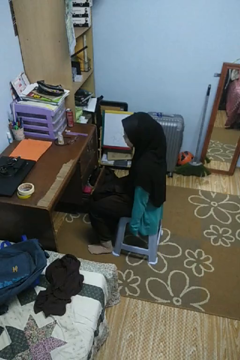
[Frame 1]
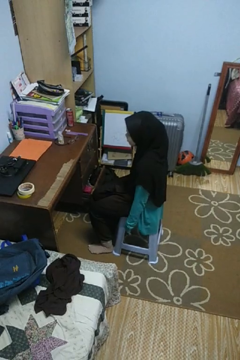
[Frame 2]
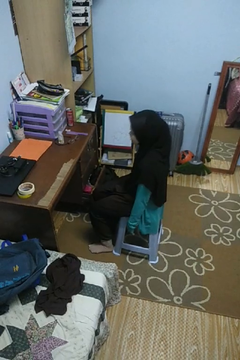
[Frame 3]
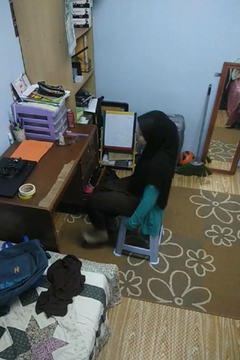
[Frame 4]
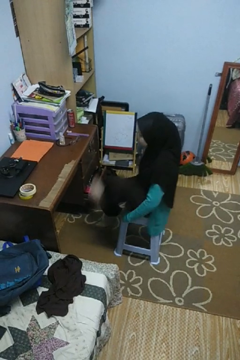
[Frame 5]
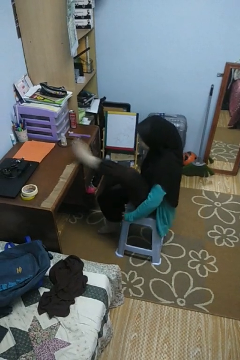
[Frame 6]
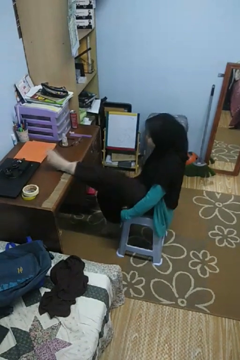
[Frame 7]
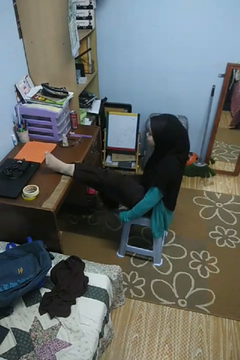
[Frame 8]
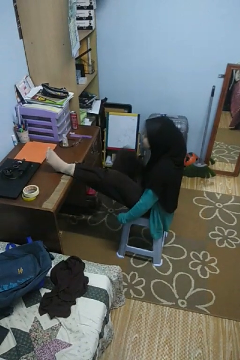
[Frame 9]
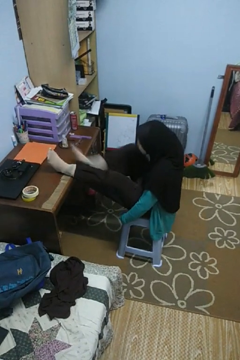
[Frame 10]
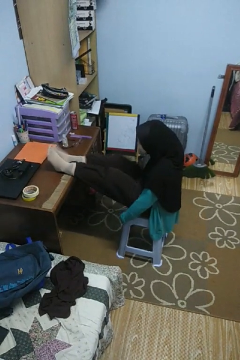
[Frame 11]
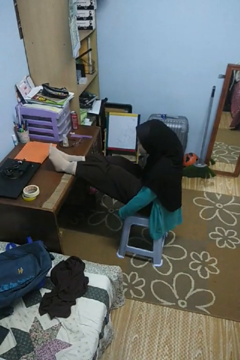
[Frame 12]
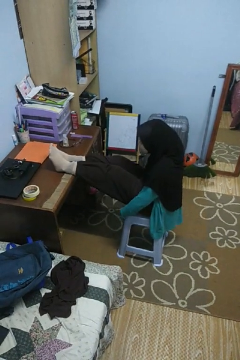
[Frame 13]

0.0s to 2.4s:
person puts feet up

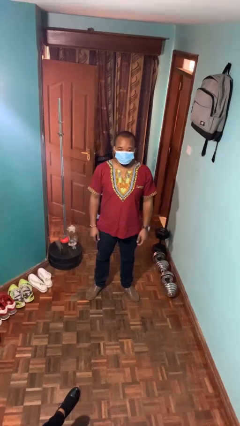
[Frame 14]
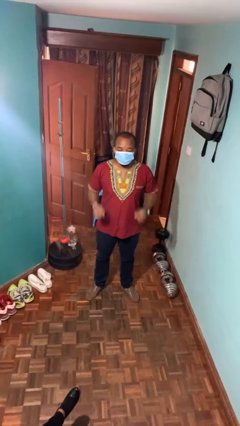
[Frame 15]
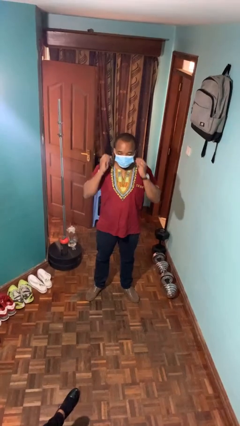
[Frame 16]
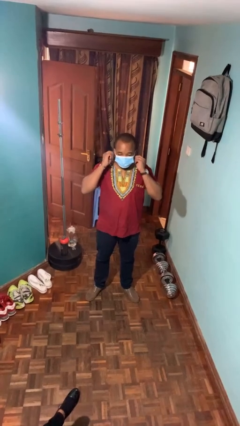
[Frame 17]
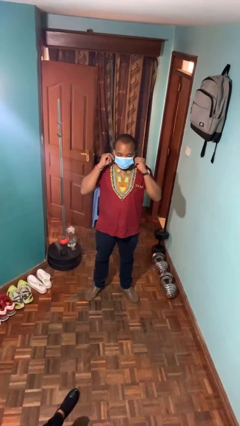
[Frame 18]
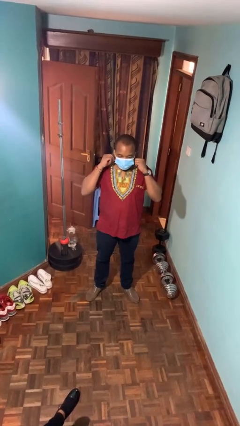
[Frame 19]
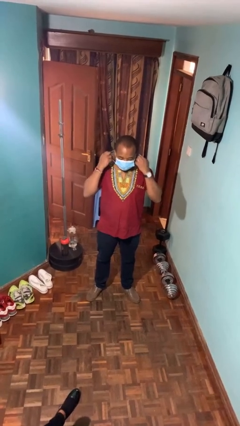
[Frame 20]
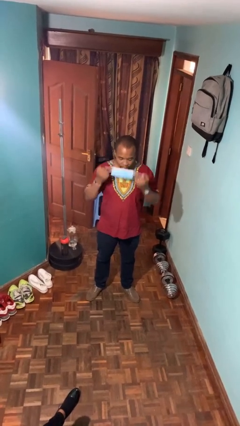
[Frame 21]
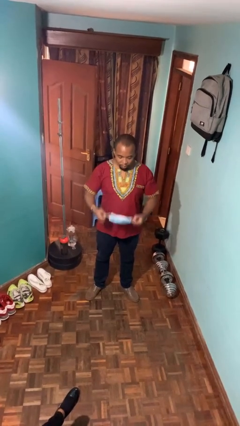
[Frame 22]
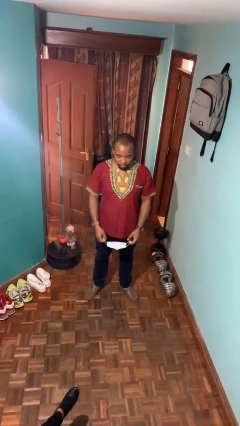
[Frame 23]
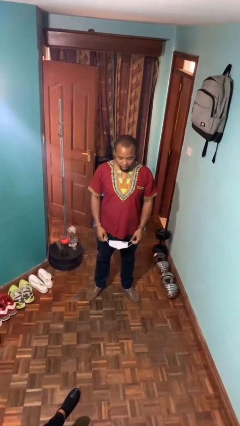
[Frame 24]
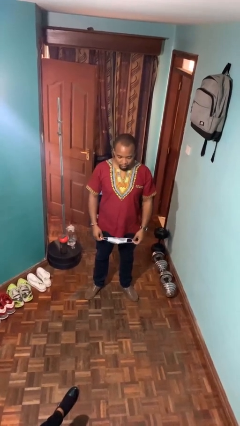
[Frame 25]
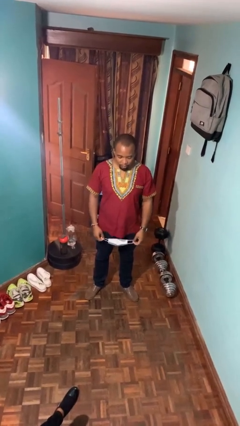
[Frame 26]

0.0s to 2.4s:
person takes off facemask

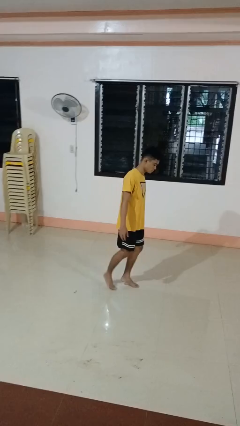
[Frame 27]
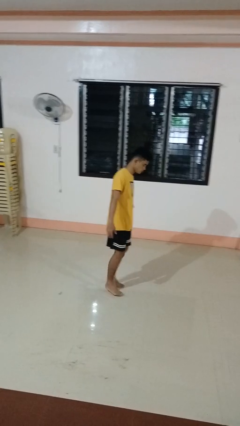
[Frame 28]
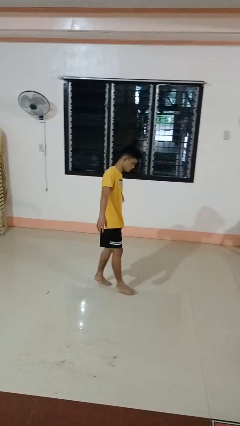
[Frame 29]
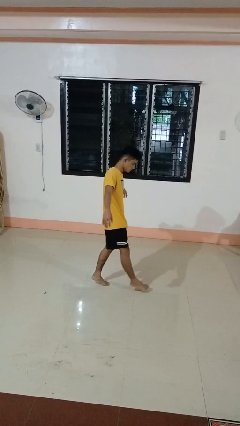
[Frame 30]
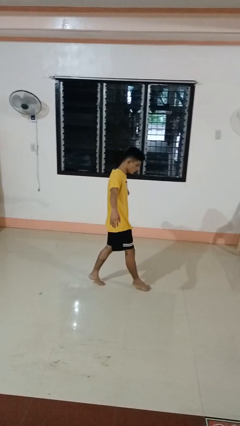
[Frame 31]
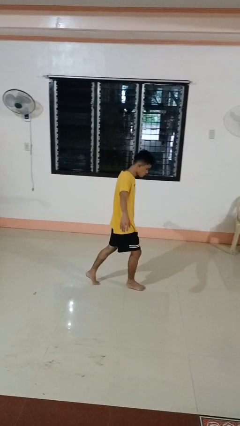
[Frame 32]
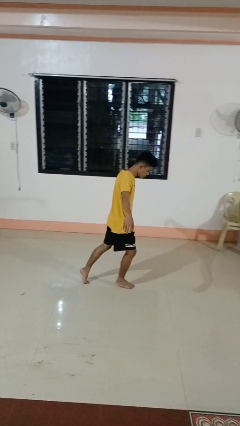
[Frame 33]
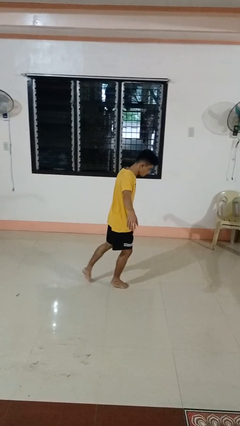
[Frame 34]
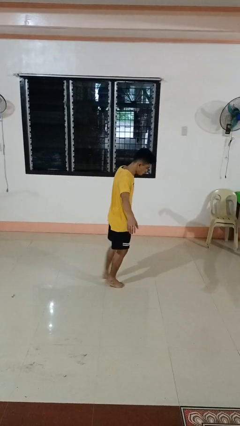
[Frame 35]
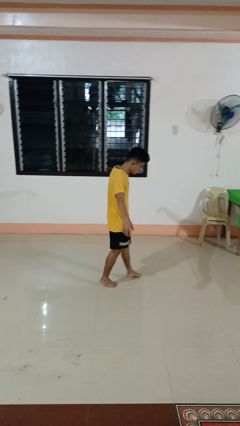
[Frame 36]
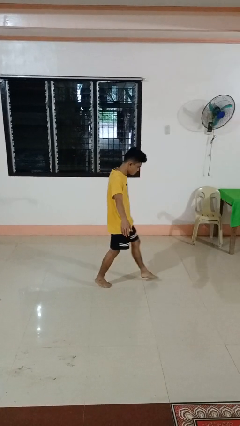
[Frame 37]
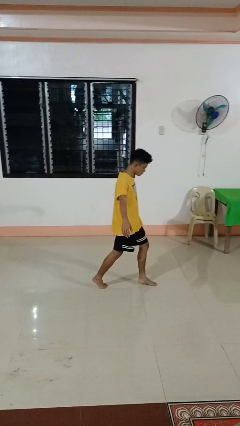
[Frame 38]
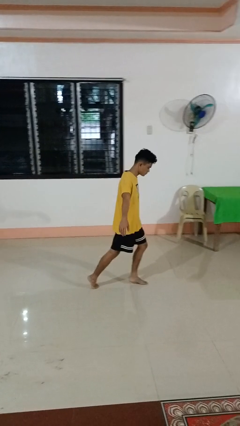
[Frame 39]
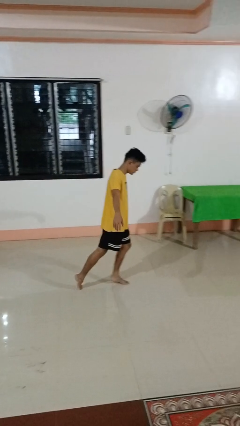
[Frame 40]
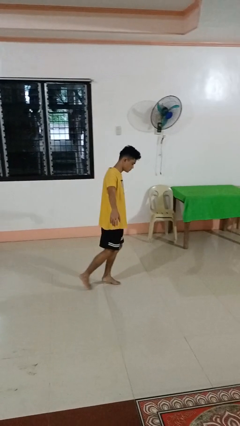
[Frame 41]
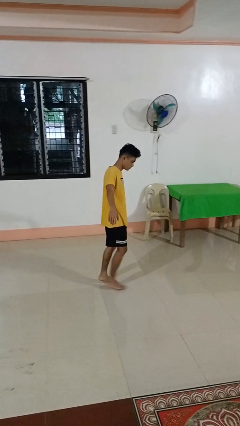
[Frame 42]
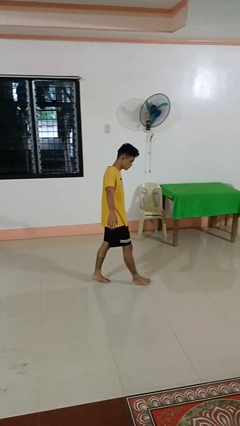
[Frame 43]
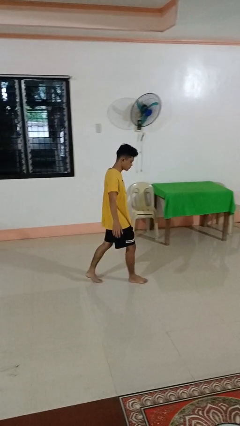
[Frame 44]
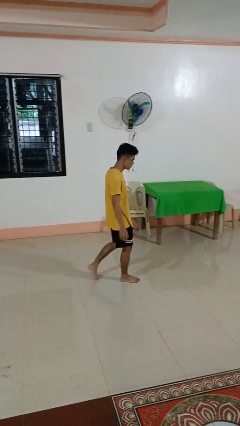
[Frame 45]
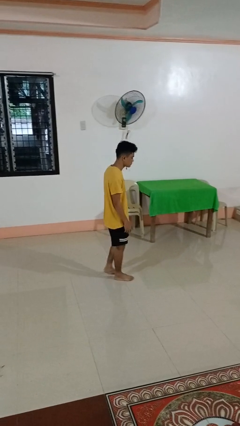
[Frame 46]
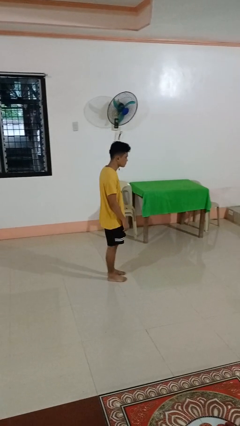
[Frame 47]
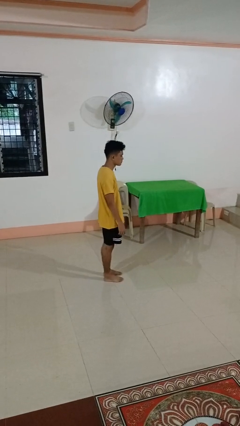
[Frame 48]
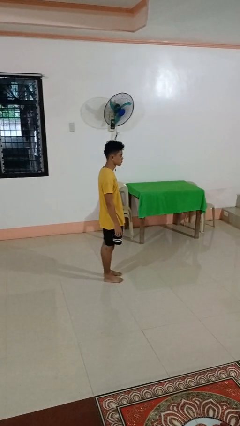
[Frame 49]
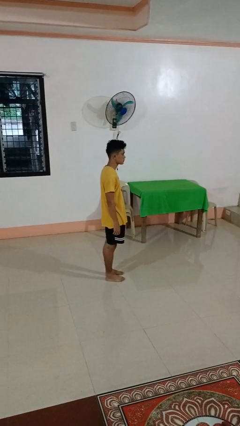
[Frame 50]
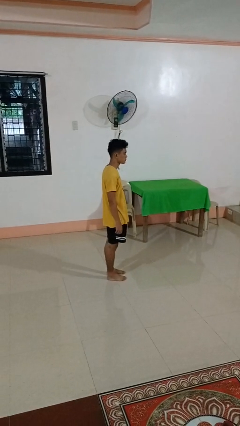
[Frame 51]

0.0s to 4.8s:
person walks tiptoe

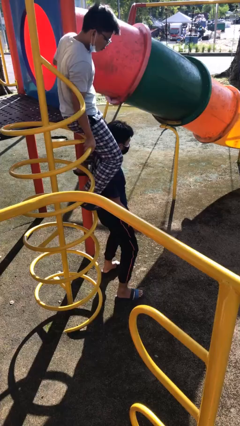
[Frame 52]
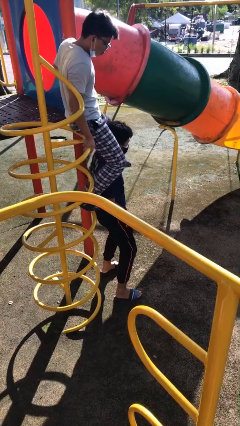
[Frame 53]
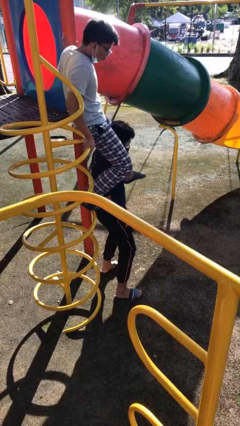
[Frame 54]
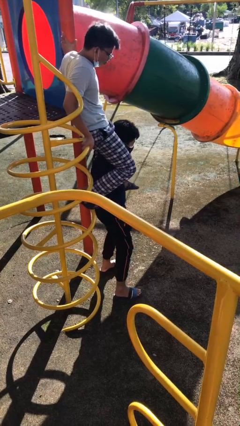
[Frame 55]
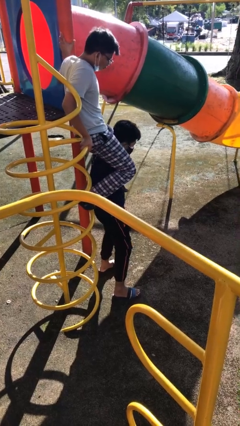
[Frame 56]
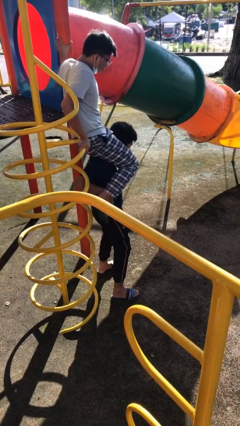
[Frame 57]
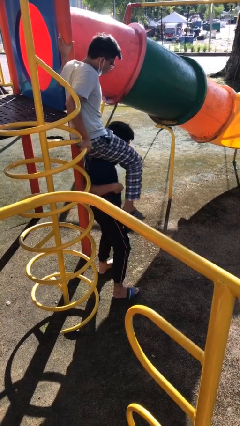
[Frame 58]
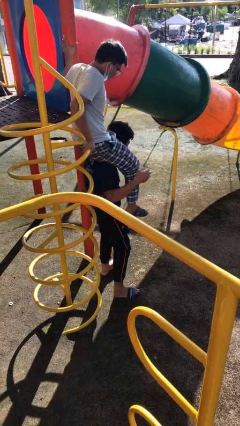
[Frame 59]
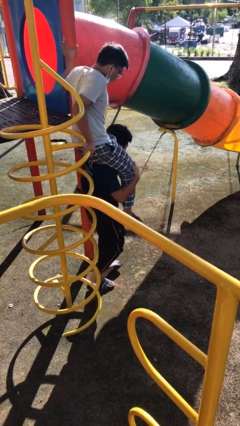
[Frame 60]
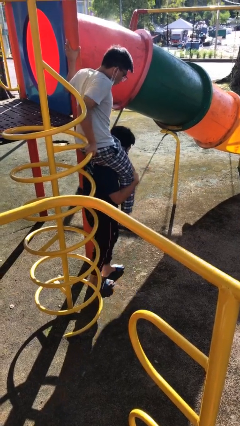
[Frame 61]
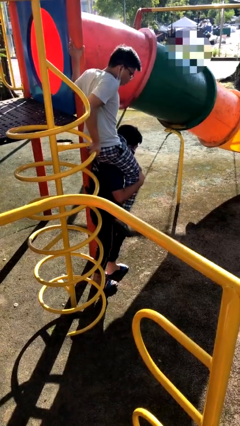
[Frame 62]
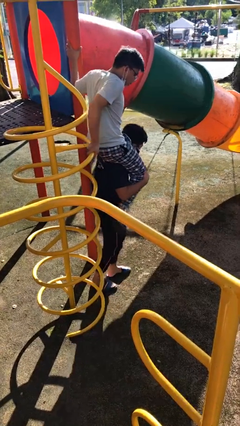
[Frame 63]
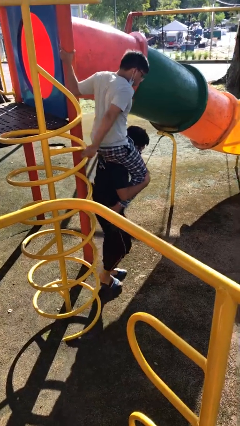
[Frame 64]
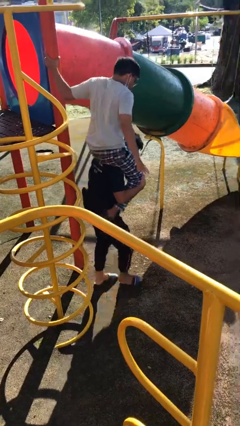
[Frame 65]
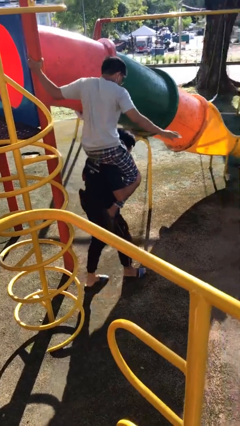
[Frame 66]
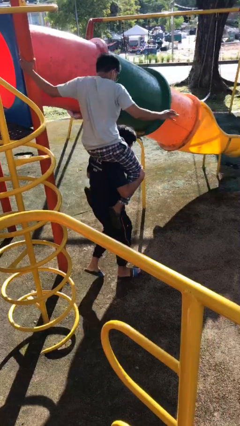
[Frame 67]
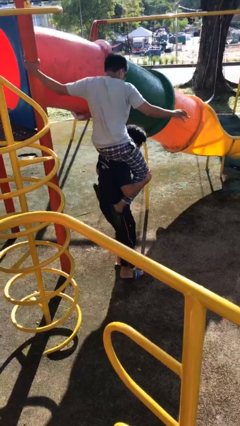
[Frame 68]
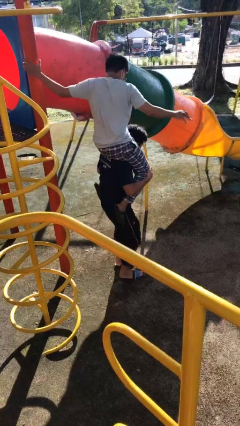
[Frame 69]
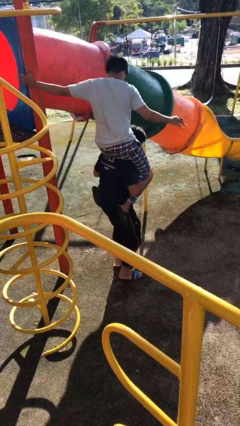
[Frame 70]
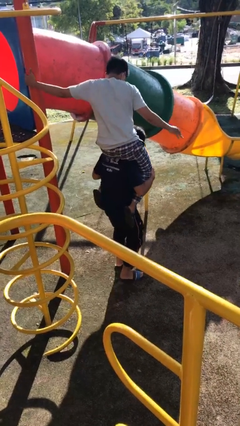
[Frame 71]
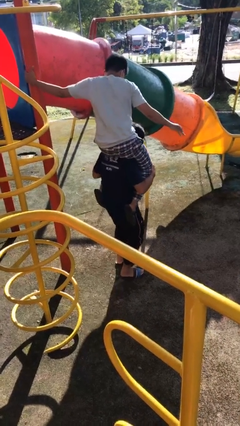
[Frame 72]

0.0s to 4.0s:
person carries person on shoulders

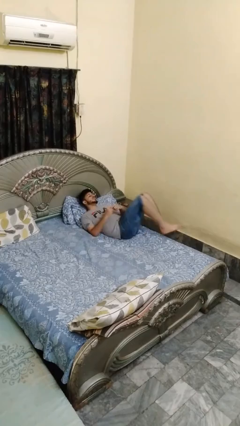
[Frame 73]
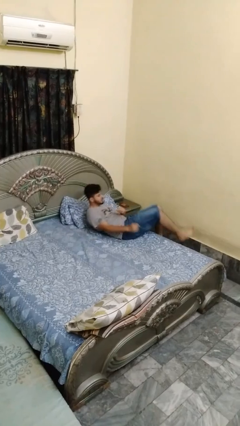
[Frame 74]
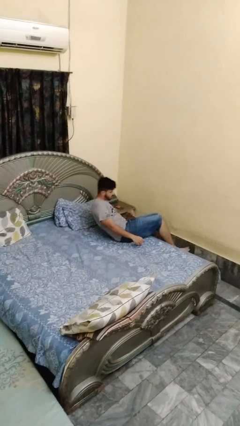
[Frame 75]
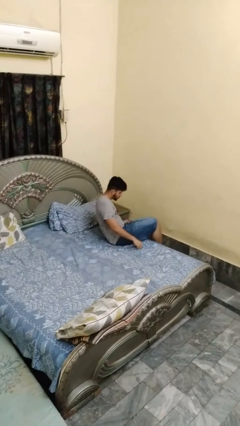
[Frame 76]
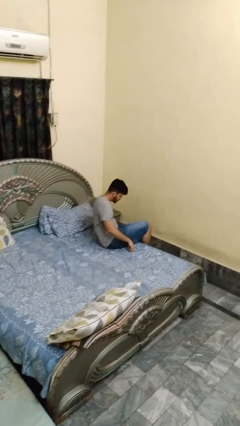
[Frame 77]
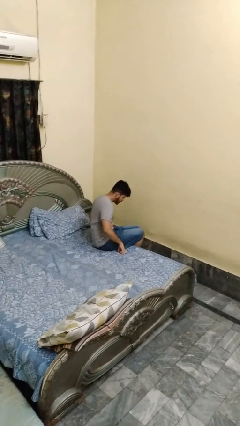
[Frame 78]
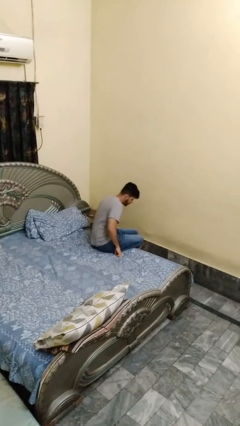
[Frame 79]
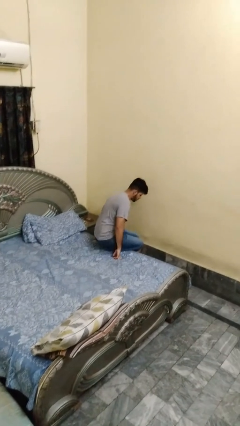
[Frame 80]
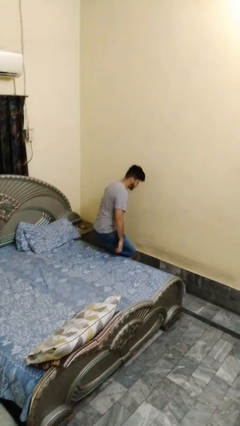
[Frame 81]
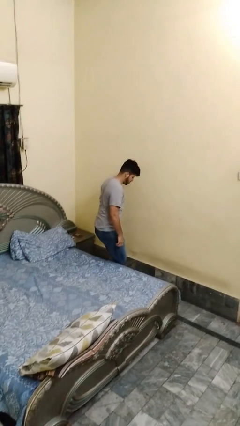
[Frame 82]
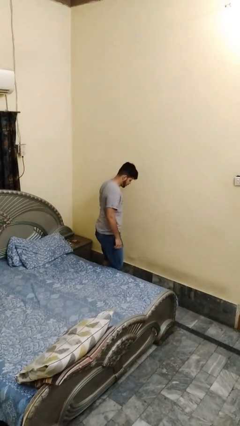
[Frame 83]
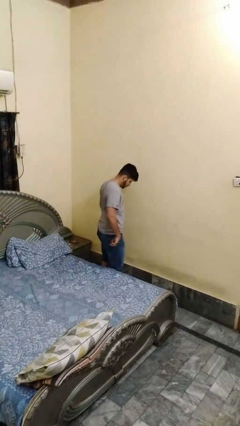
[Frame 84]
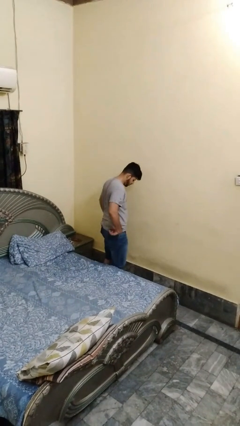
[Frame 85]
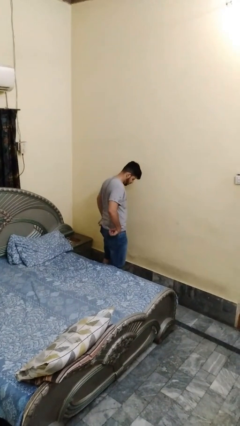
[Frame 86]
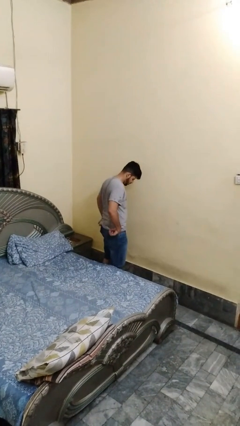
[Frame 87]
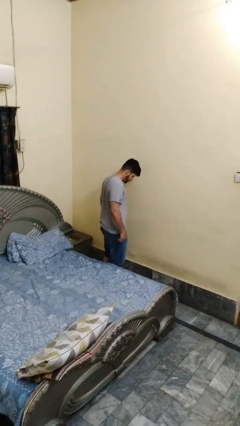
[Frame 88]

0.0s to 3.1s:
person stands up

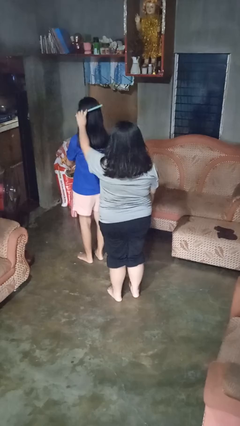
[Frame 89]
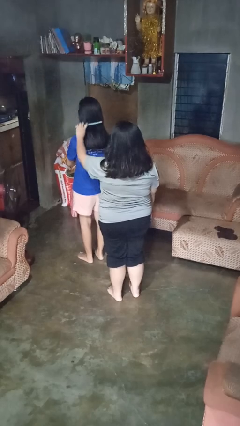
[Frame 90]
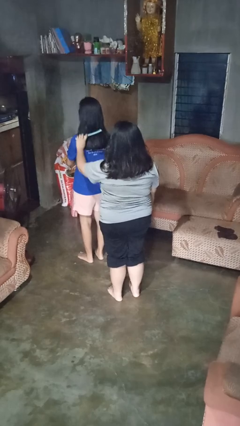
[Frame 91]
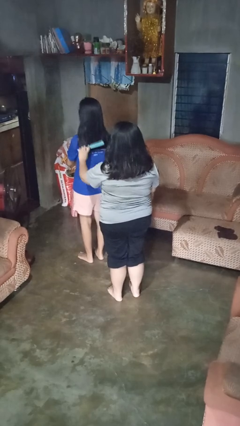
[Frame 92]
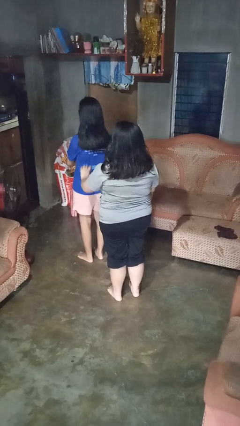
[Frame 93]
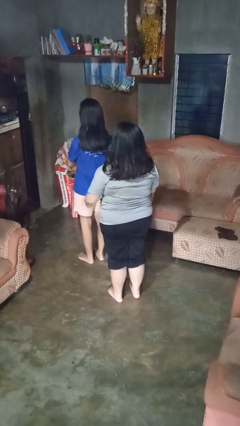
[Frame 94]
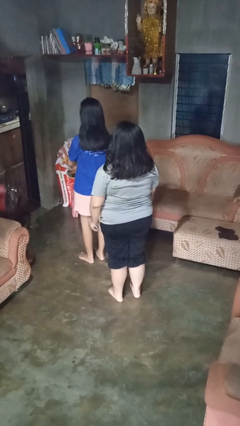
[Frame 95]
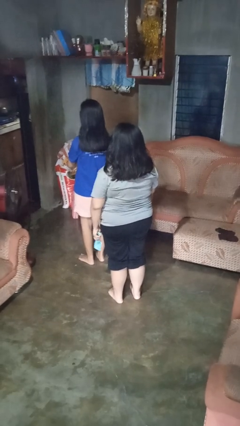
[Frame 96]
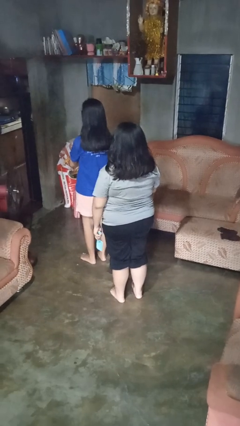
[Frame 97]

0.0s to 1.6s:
person brushes hair of person
